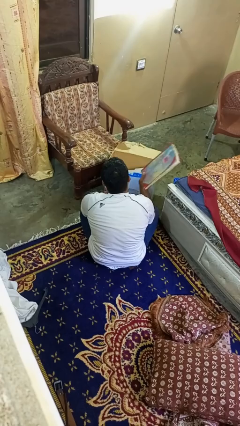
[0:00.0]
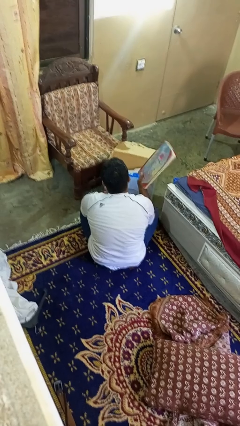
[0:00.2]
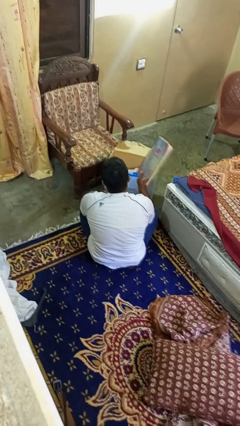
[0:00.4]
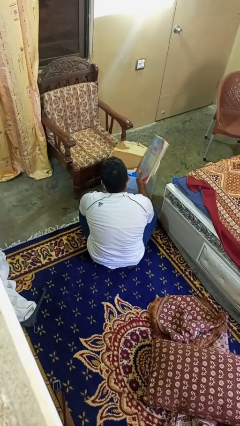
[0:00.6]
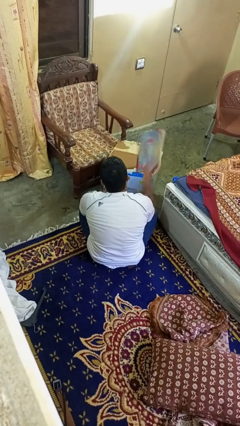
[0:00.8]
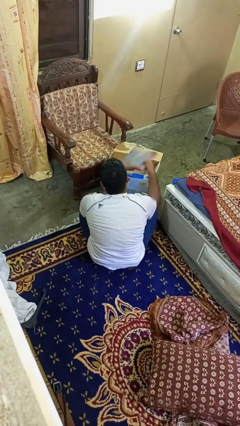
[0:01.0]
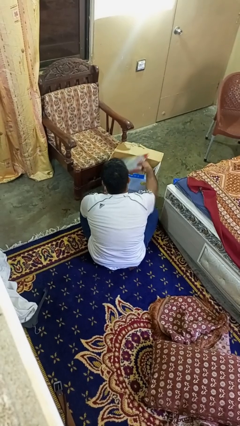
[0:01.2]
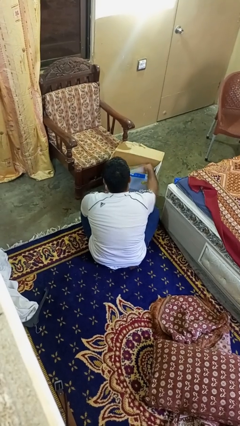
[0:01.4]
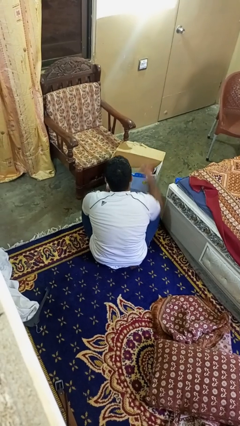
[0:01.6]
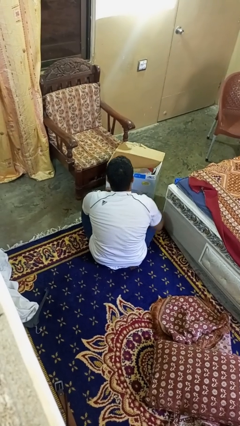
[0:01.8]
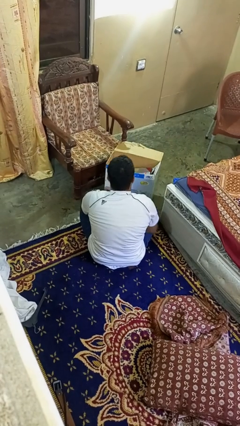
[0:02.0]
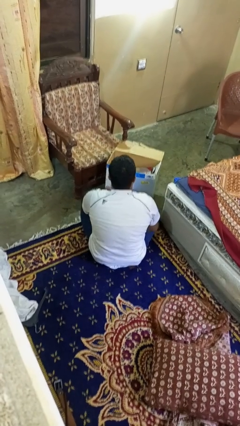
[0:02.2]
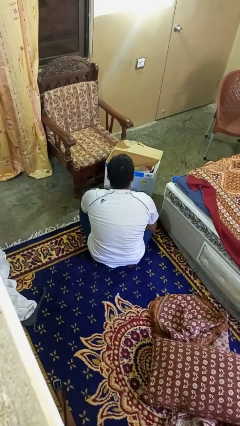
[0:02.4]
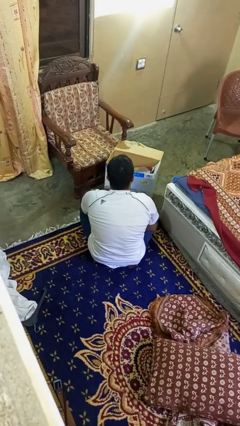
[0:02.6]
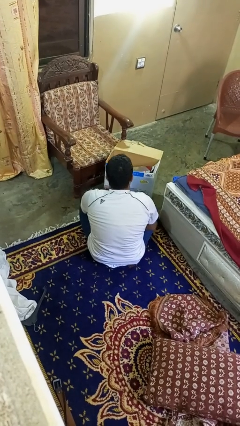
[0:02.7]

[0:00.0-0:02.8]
person puts object into box

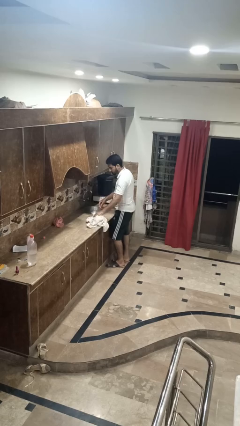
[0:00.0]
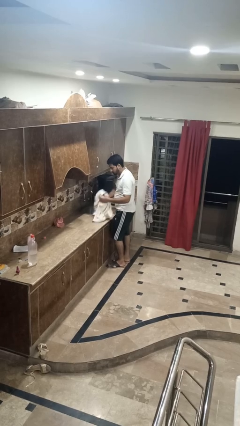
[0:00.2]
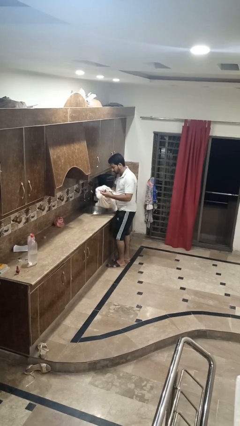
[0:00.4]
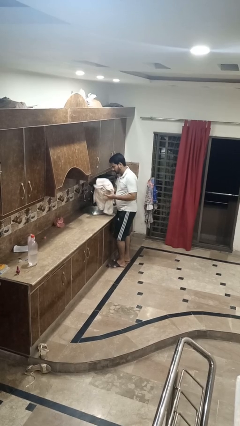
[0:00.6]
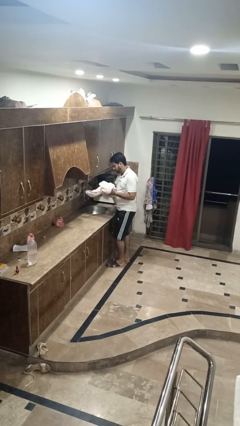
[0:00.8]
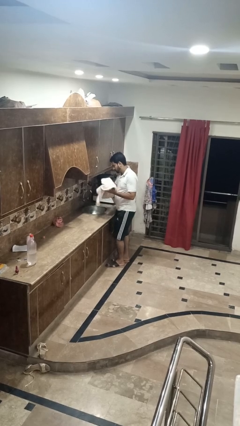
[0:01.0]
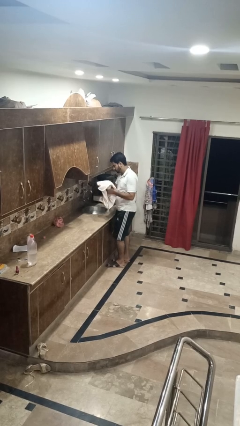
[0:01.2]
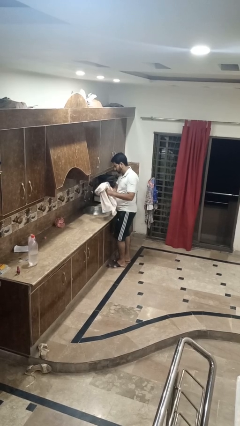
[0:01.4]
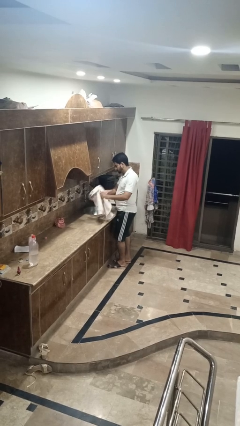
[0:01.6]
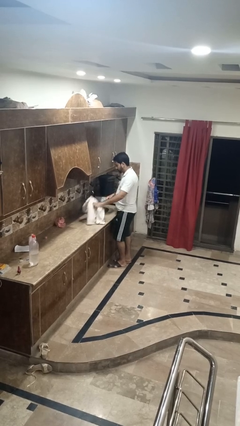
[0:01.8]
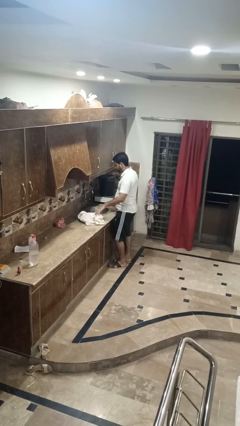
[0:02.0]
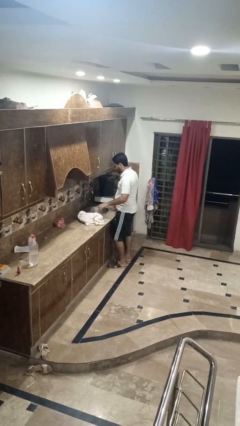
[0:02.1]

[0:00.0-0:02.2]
person dries hands with towel

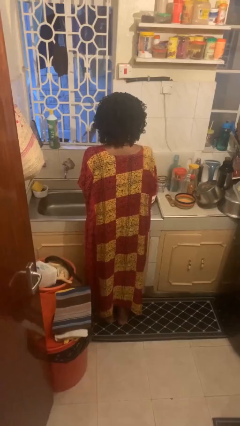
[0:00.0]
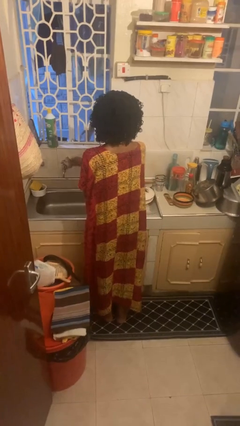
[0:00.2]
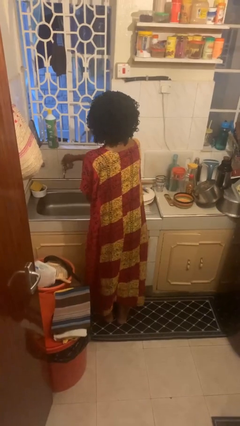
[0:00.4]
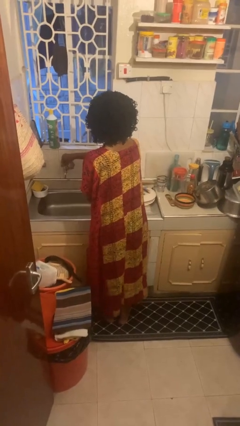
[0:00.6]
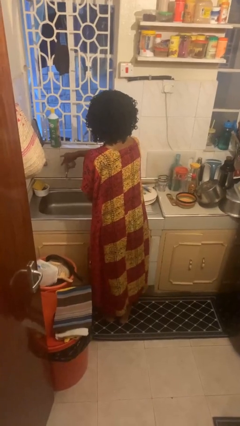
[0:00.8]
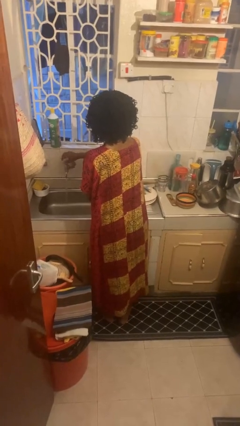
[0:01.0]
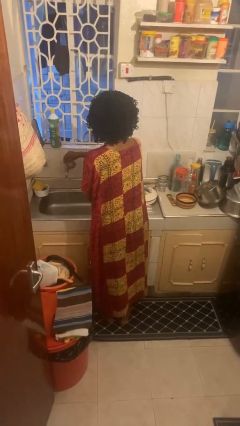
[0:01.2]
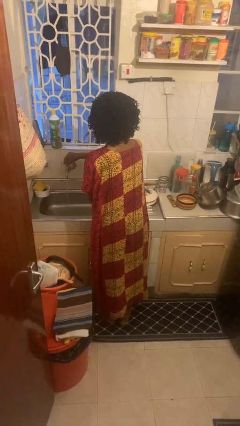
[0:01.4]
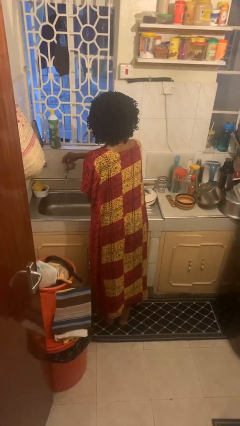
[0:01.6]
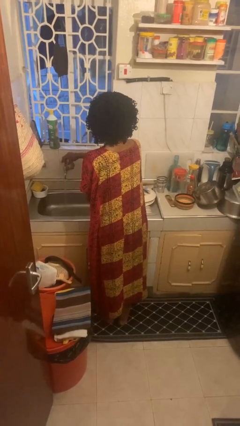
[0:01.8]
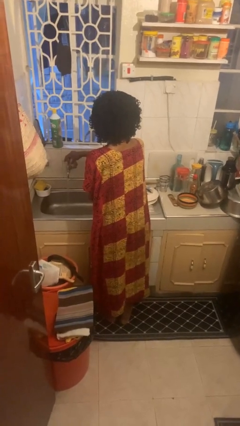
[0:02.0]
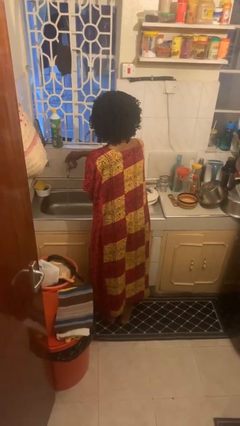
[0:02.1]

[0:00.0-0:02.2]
person turns on faucet

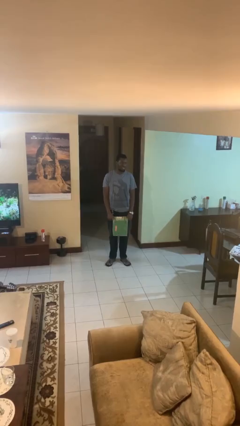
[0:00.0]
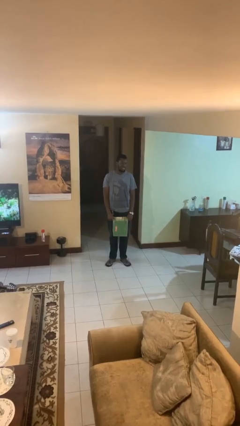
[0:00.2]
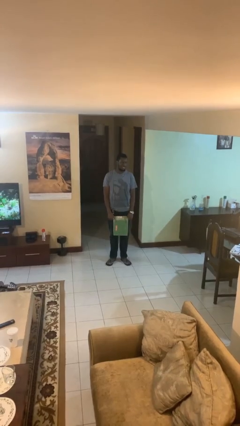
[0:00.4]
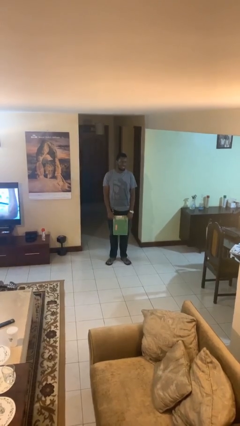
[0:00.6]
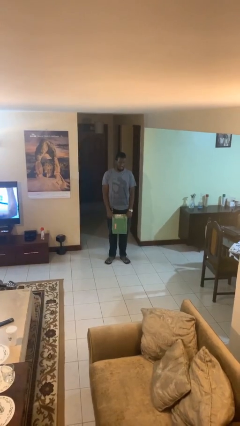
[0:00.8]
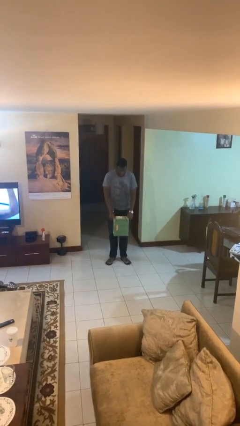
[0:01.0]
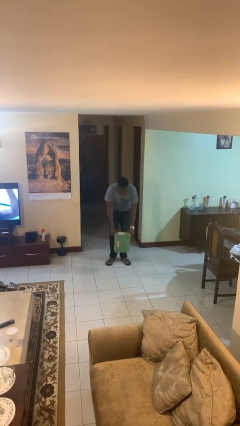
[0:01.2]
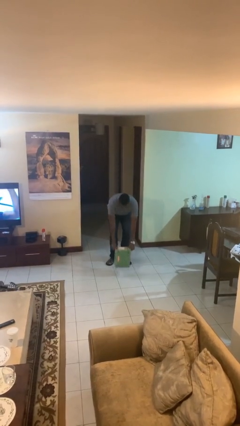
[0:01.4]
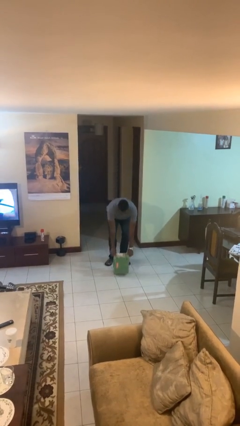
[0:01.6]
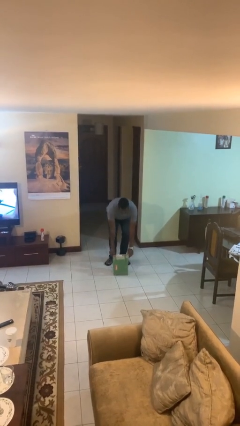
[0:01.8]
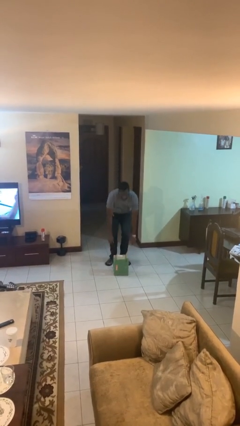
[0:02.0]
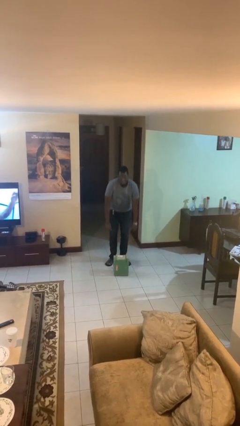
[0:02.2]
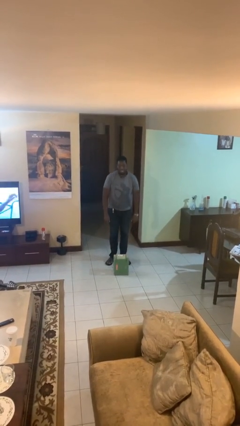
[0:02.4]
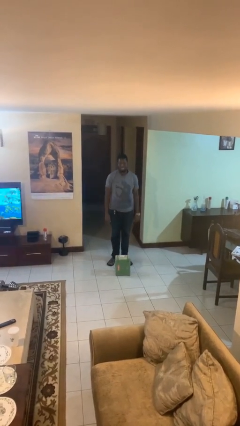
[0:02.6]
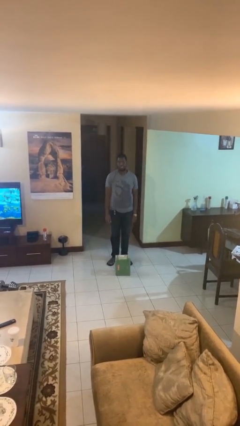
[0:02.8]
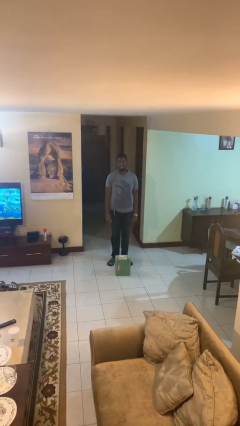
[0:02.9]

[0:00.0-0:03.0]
person puts down object on floor

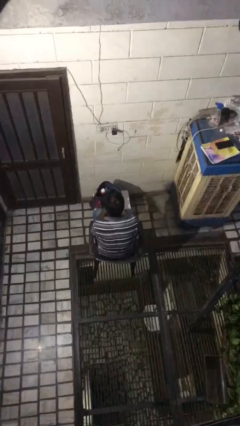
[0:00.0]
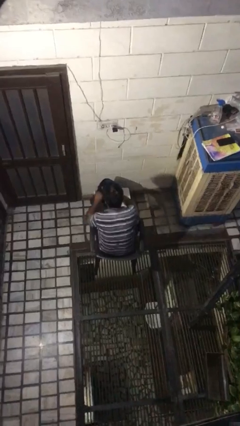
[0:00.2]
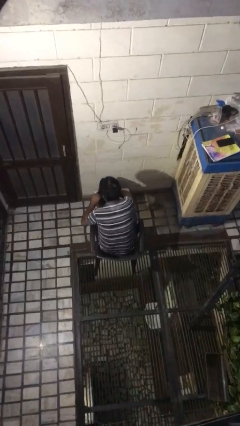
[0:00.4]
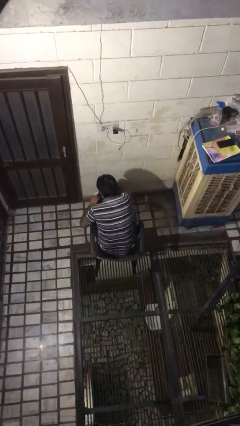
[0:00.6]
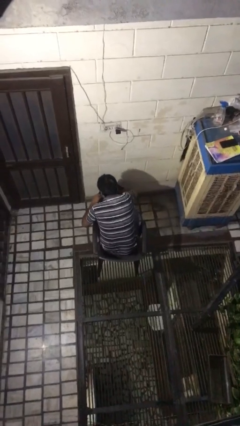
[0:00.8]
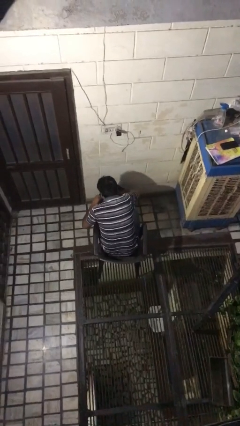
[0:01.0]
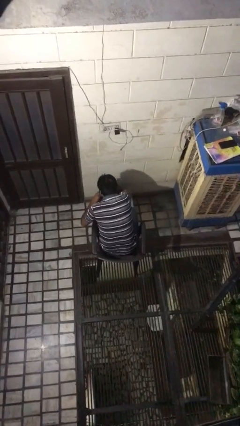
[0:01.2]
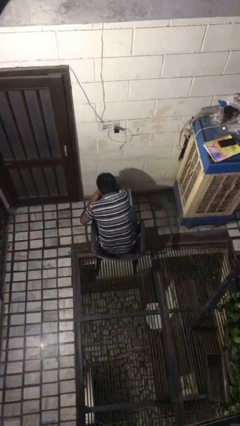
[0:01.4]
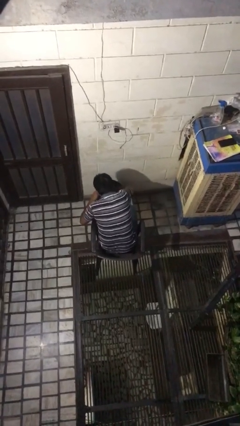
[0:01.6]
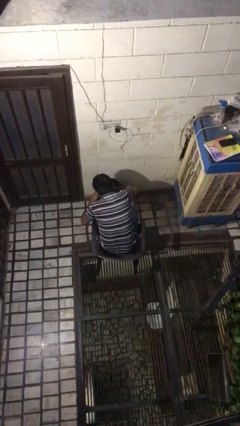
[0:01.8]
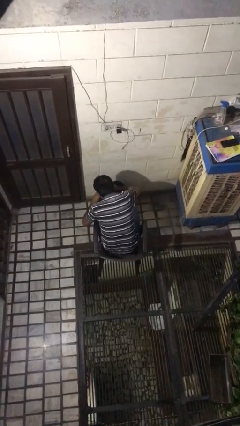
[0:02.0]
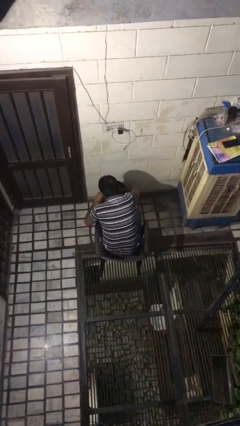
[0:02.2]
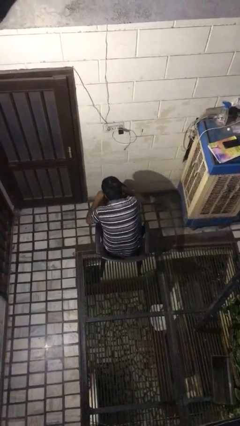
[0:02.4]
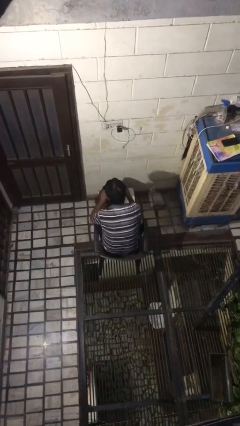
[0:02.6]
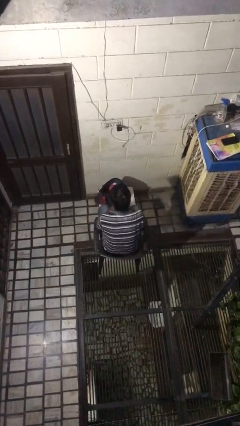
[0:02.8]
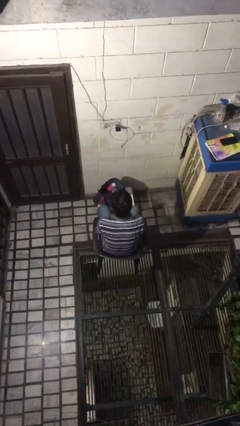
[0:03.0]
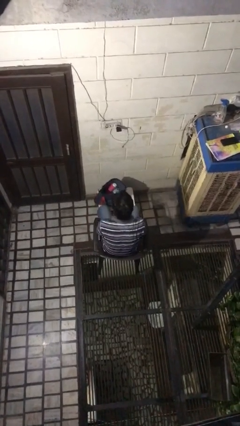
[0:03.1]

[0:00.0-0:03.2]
person searches in bag

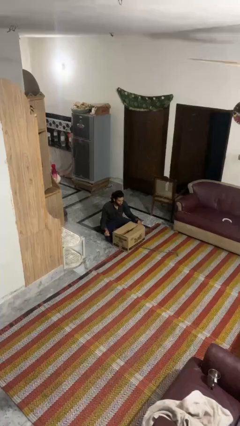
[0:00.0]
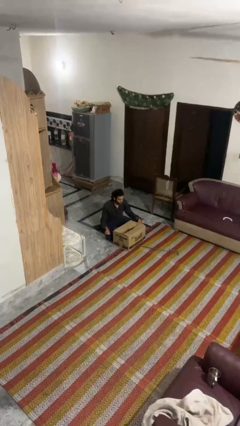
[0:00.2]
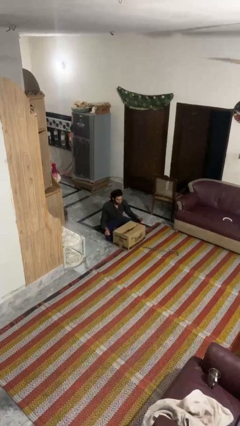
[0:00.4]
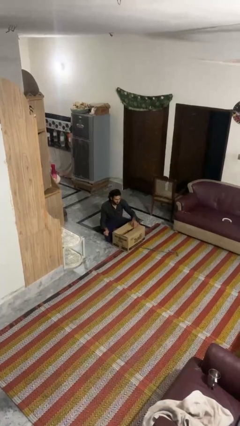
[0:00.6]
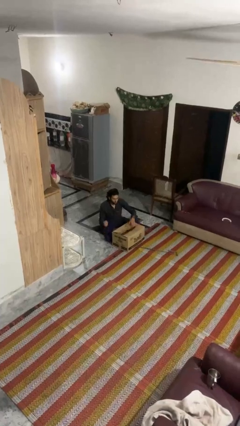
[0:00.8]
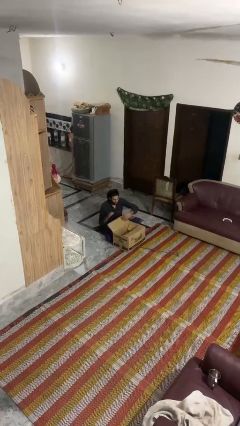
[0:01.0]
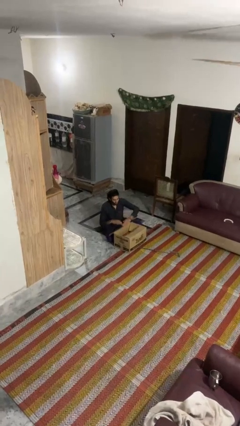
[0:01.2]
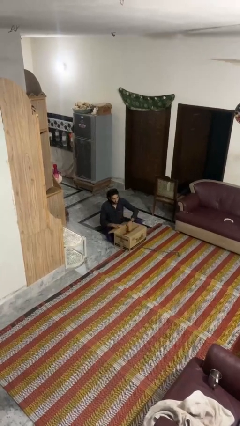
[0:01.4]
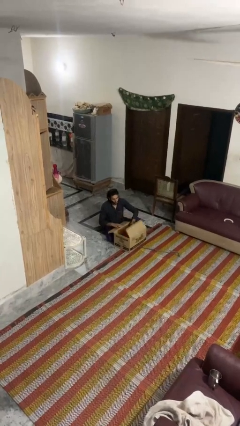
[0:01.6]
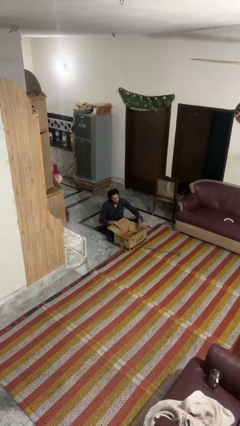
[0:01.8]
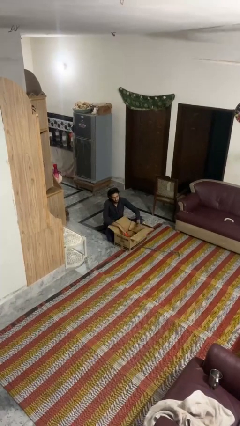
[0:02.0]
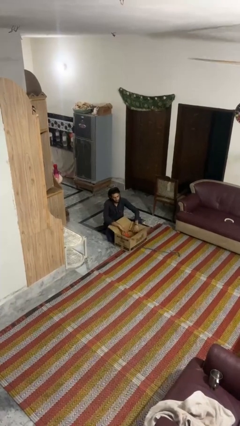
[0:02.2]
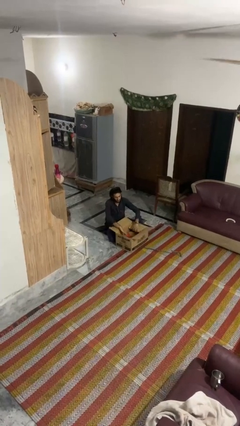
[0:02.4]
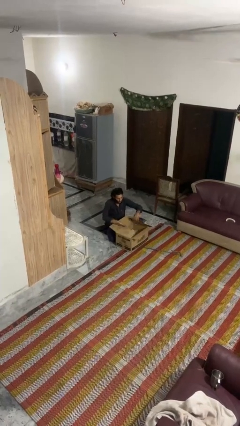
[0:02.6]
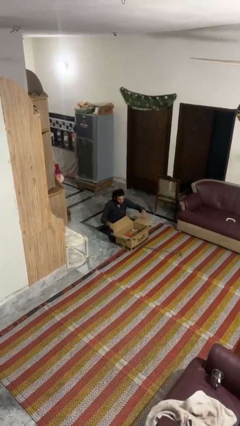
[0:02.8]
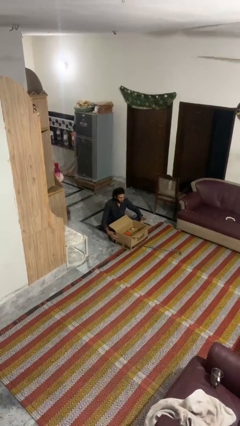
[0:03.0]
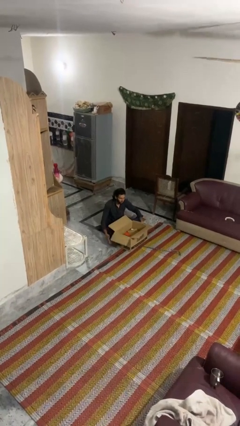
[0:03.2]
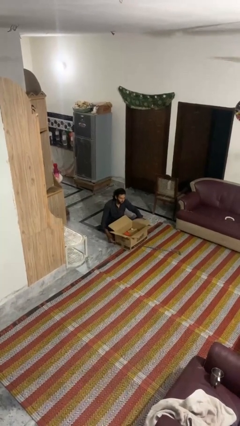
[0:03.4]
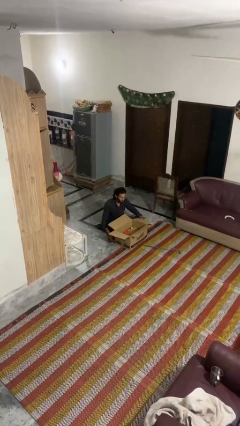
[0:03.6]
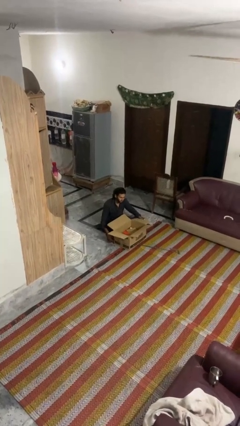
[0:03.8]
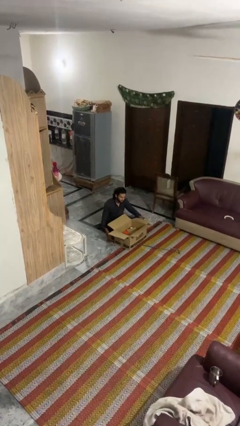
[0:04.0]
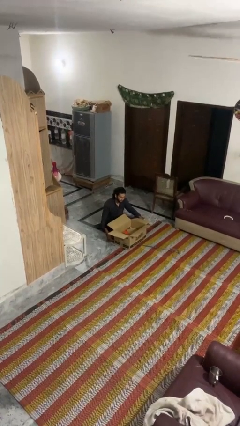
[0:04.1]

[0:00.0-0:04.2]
person opens box
